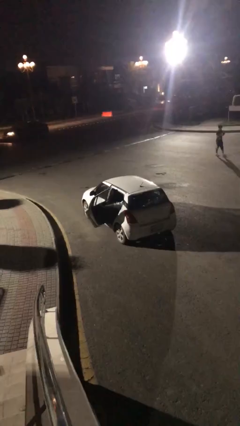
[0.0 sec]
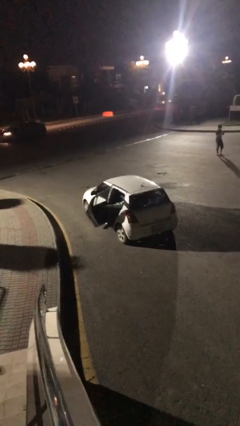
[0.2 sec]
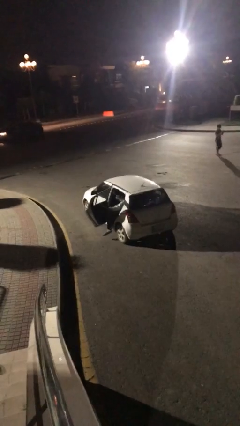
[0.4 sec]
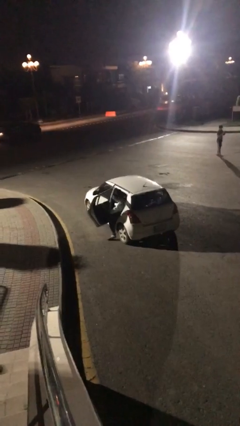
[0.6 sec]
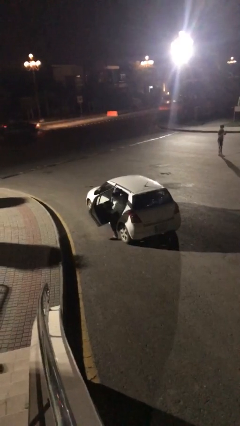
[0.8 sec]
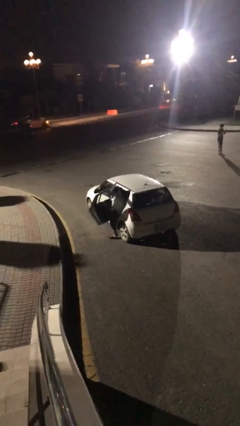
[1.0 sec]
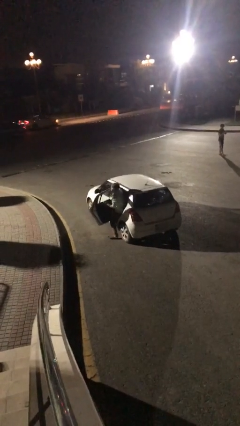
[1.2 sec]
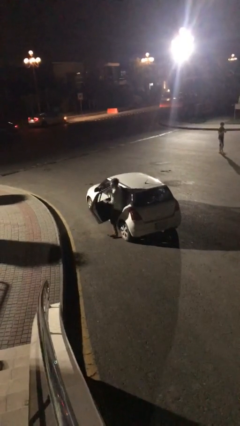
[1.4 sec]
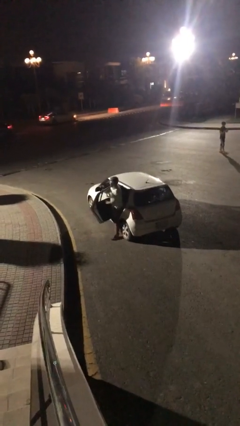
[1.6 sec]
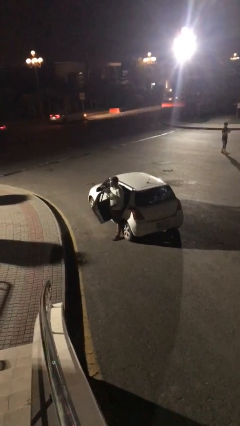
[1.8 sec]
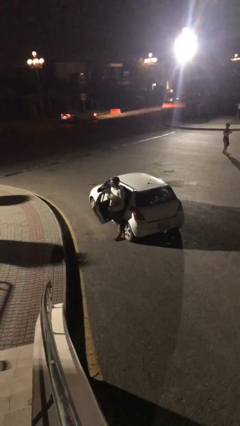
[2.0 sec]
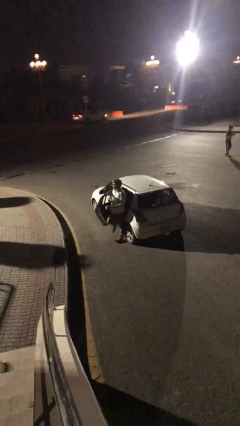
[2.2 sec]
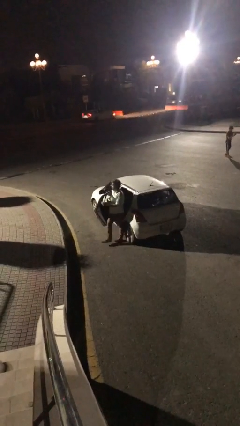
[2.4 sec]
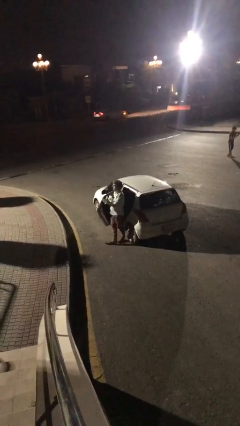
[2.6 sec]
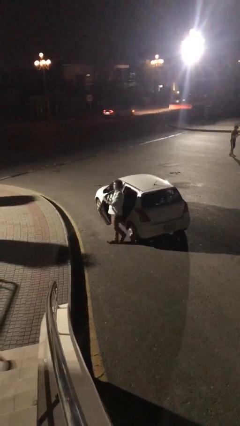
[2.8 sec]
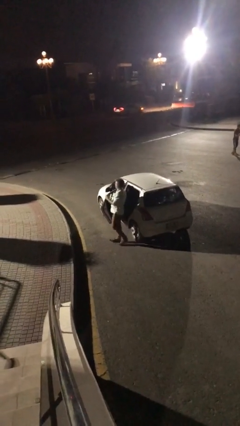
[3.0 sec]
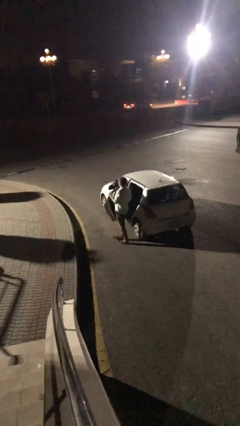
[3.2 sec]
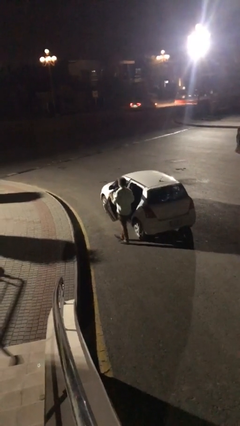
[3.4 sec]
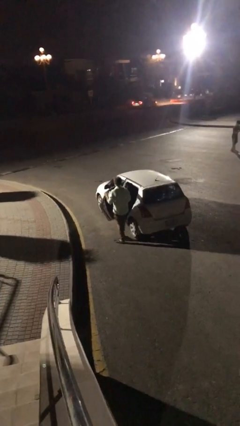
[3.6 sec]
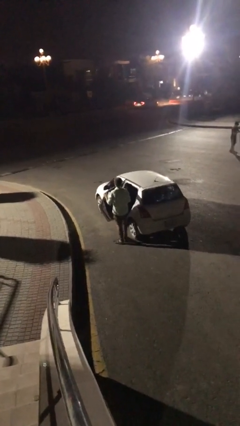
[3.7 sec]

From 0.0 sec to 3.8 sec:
person exits car

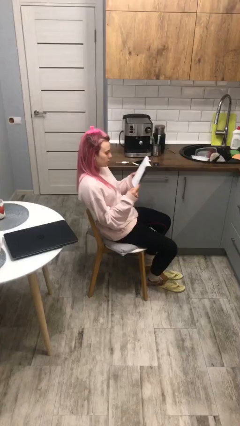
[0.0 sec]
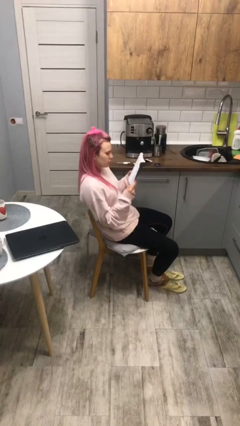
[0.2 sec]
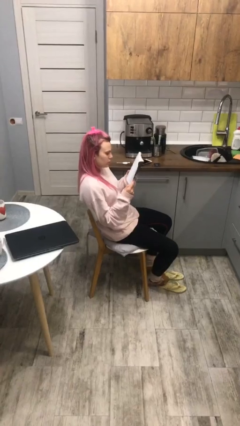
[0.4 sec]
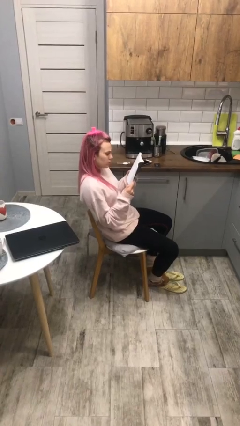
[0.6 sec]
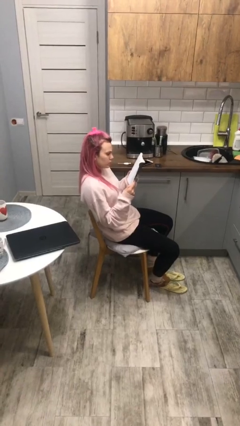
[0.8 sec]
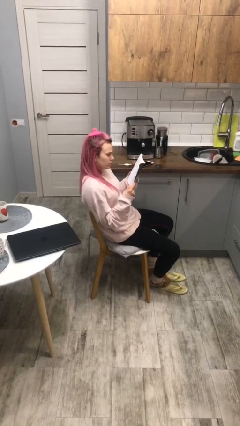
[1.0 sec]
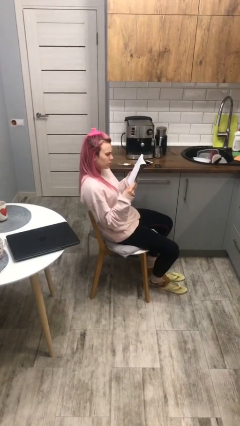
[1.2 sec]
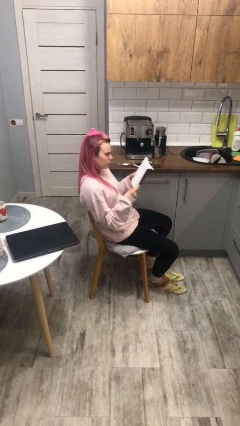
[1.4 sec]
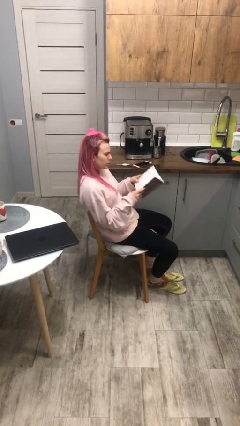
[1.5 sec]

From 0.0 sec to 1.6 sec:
person reads document

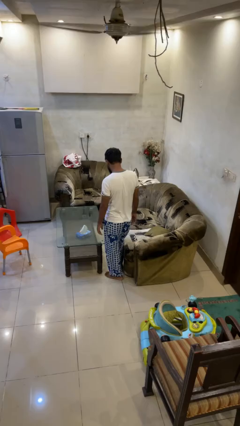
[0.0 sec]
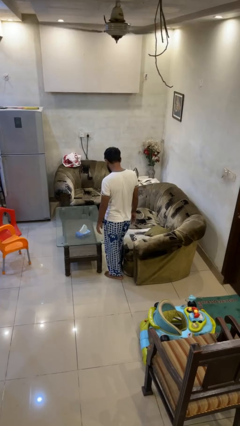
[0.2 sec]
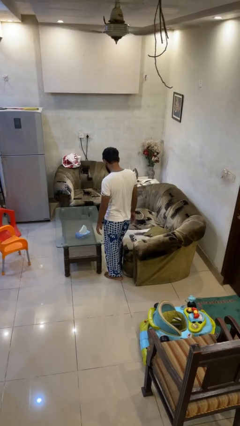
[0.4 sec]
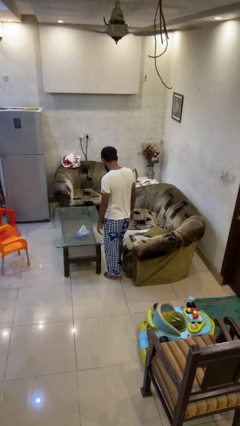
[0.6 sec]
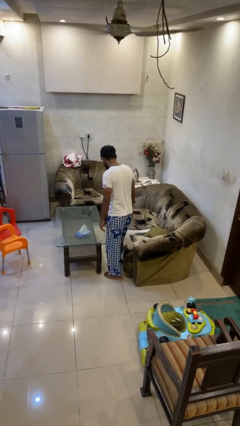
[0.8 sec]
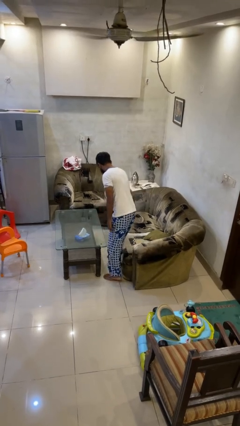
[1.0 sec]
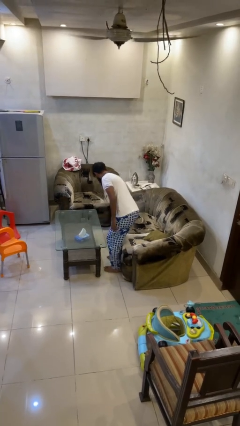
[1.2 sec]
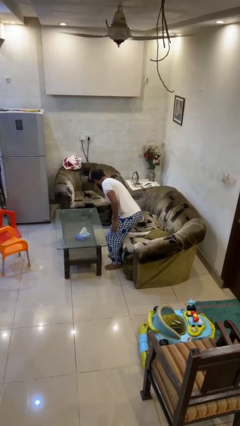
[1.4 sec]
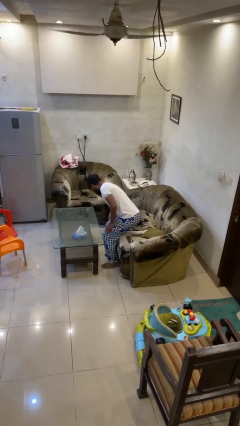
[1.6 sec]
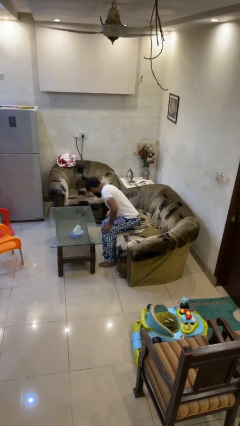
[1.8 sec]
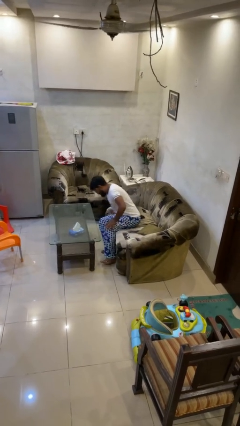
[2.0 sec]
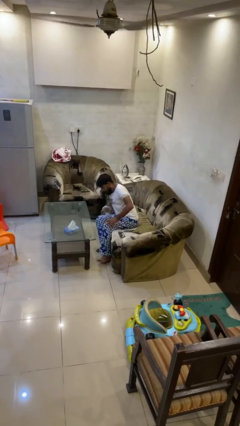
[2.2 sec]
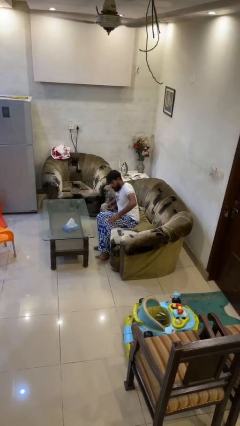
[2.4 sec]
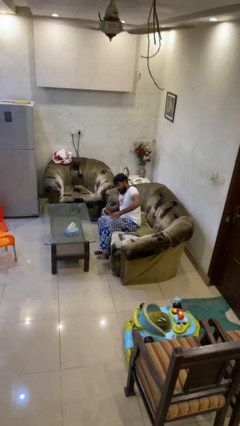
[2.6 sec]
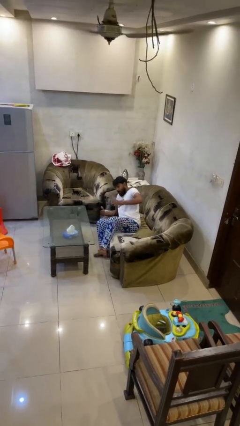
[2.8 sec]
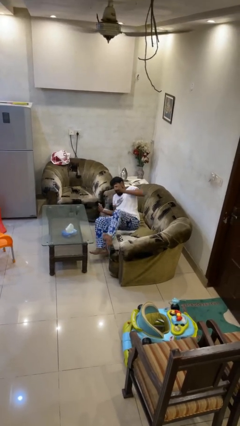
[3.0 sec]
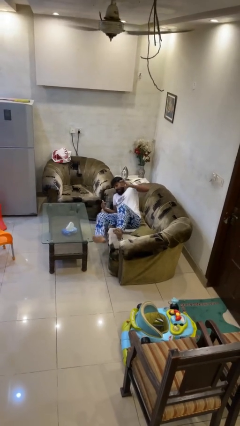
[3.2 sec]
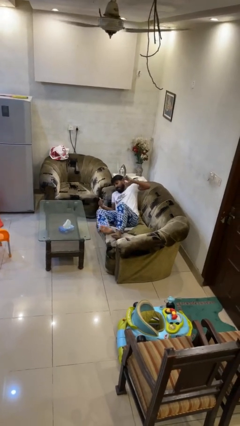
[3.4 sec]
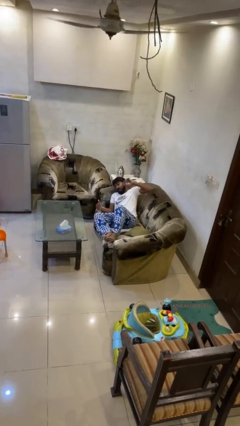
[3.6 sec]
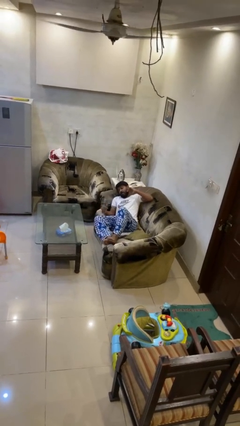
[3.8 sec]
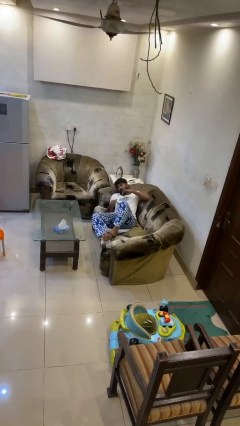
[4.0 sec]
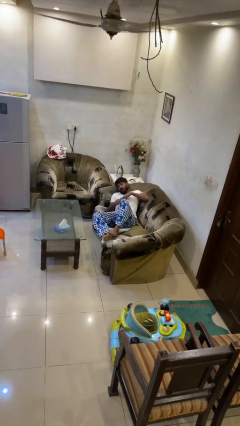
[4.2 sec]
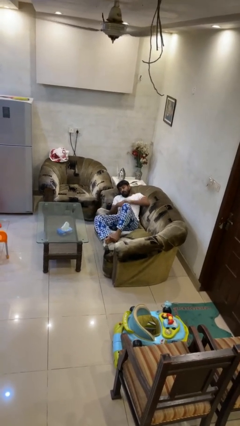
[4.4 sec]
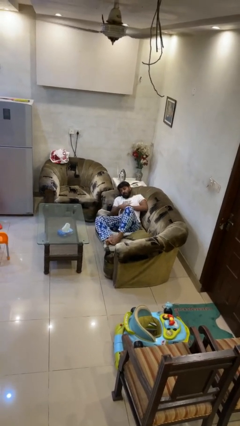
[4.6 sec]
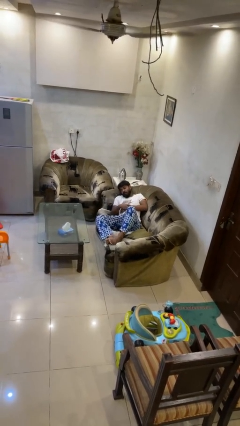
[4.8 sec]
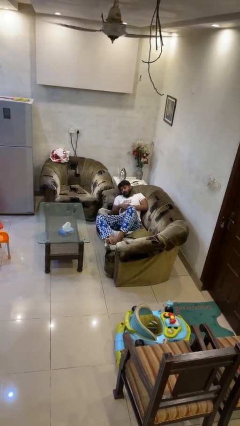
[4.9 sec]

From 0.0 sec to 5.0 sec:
person lies down on couch

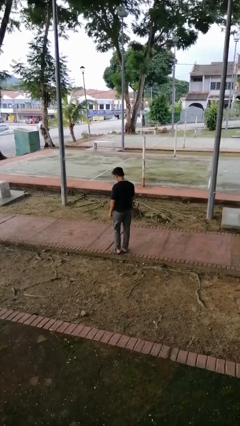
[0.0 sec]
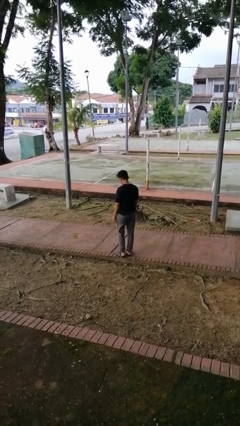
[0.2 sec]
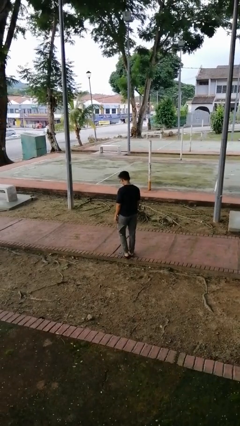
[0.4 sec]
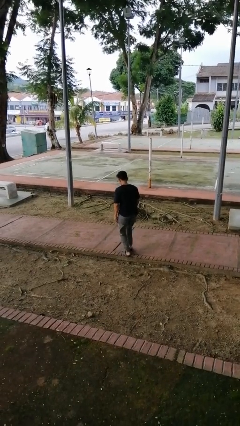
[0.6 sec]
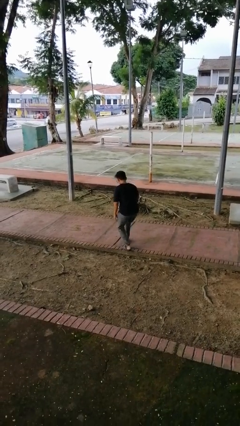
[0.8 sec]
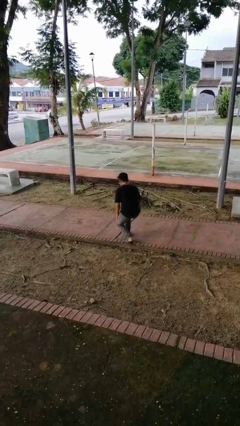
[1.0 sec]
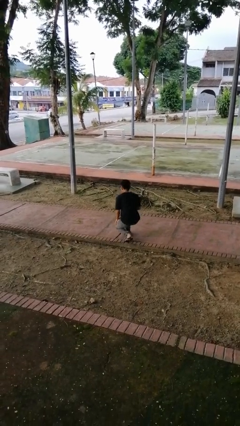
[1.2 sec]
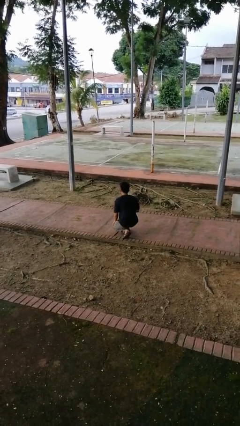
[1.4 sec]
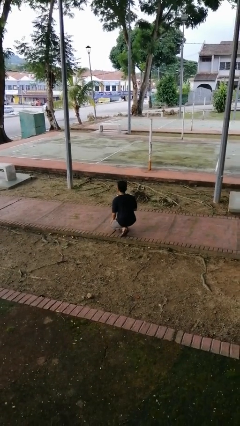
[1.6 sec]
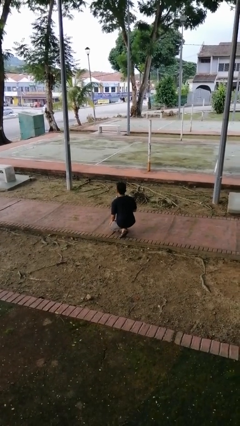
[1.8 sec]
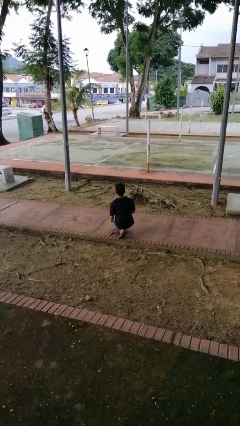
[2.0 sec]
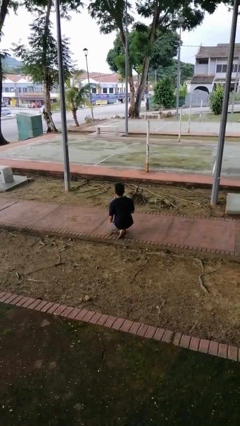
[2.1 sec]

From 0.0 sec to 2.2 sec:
person kneels

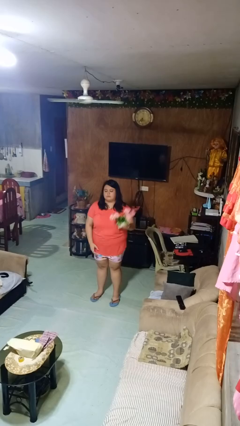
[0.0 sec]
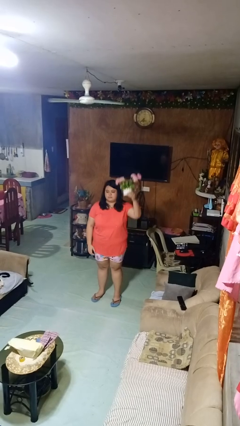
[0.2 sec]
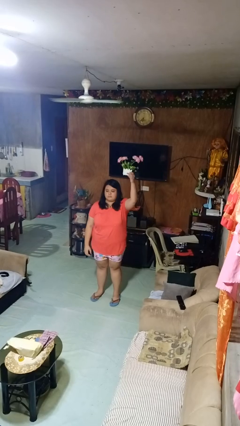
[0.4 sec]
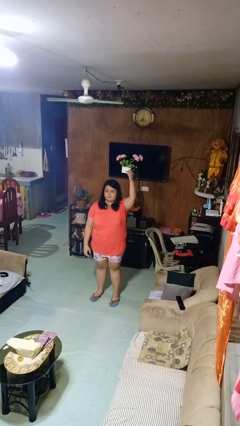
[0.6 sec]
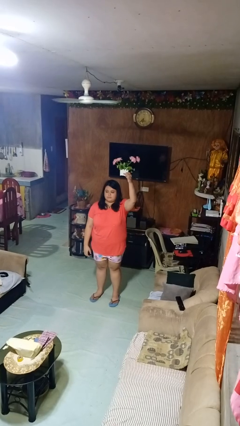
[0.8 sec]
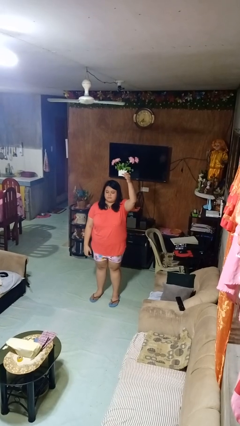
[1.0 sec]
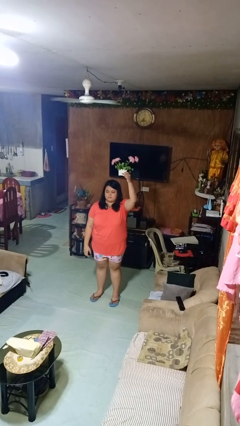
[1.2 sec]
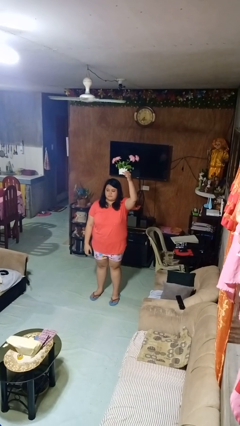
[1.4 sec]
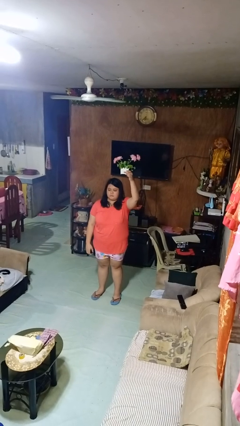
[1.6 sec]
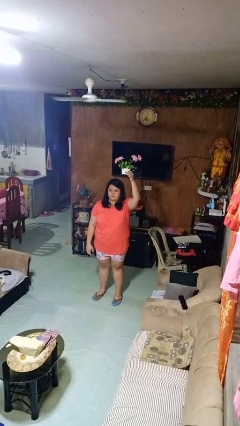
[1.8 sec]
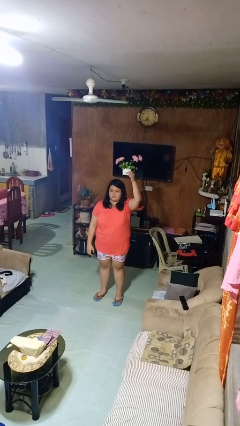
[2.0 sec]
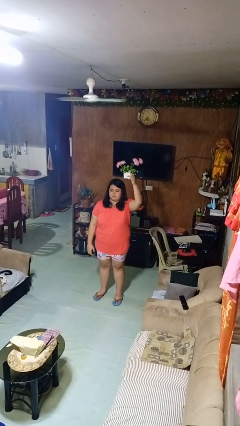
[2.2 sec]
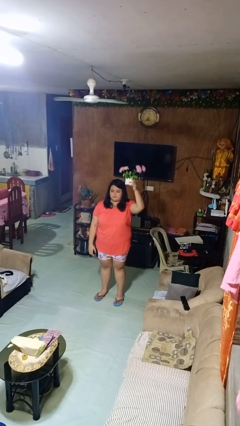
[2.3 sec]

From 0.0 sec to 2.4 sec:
person holds object above head

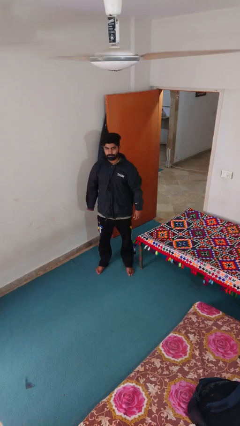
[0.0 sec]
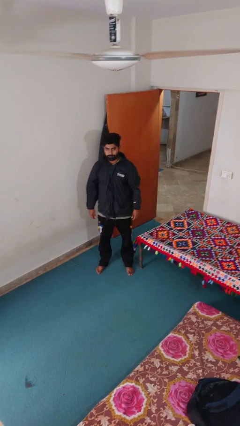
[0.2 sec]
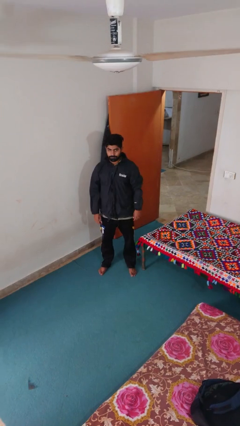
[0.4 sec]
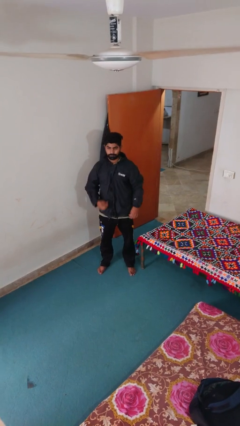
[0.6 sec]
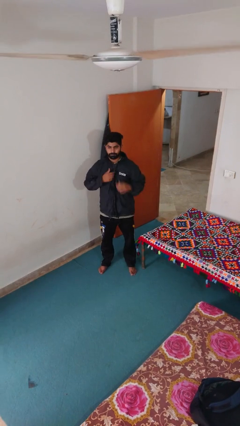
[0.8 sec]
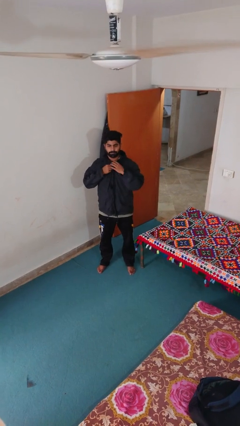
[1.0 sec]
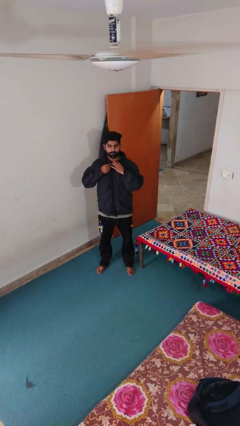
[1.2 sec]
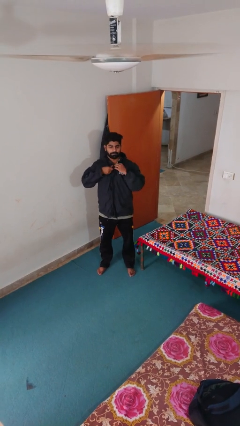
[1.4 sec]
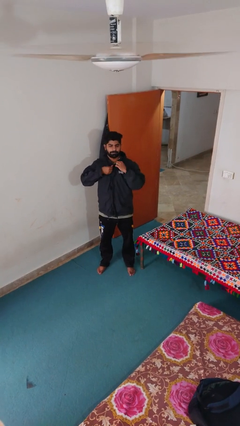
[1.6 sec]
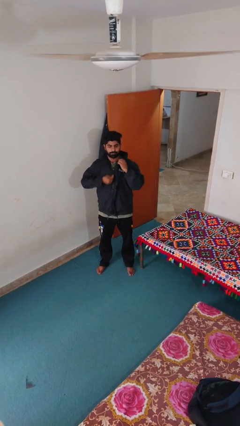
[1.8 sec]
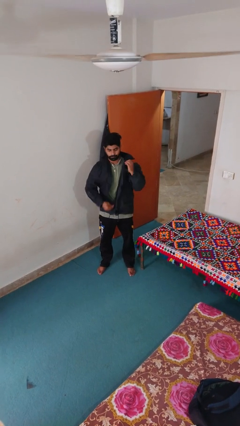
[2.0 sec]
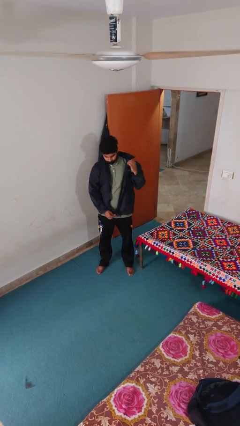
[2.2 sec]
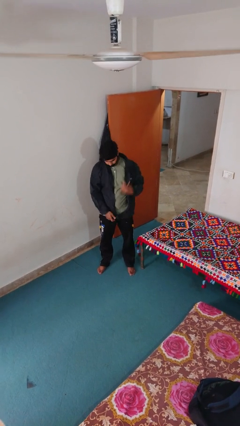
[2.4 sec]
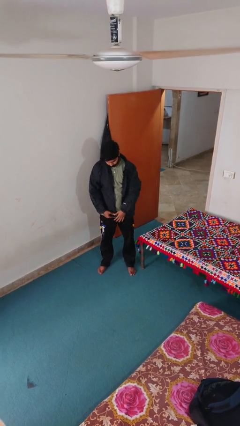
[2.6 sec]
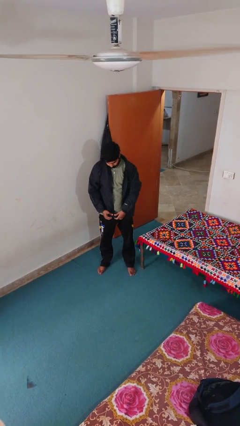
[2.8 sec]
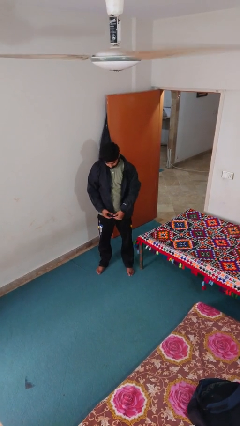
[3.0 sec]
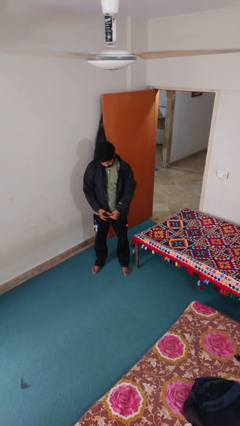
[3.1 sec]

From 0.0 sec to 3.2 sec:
person unzips jacket
